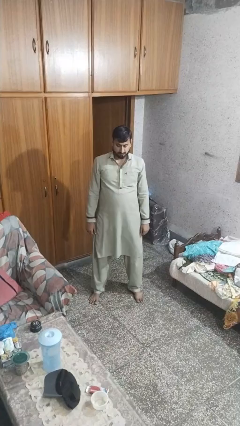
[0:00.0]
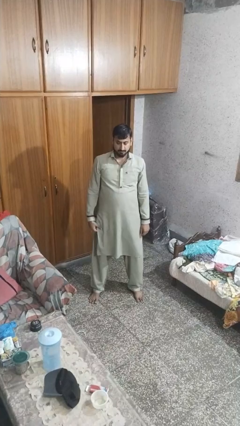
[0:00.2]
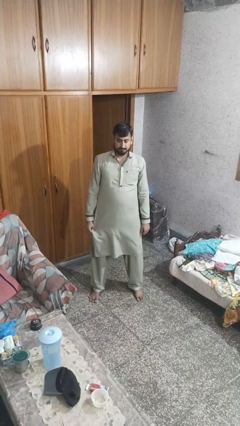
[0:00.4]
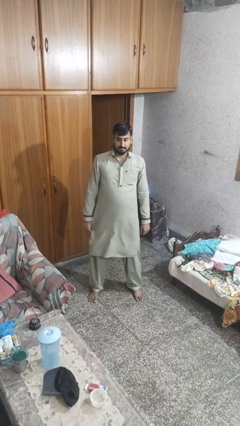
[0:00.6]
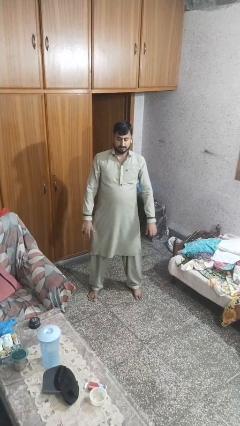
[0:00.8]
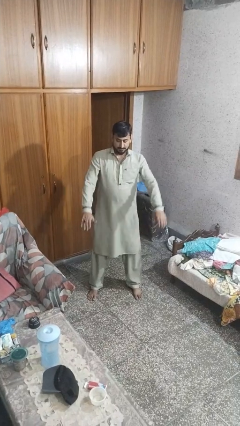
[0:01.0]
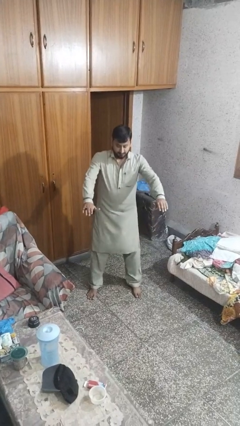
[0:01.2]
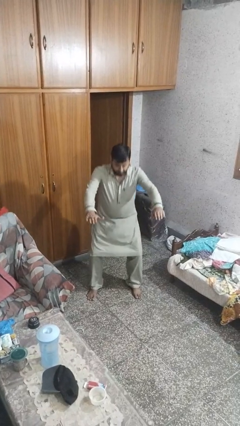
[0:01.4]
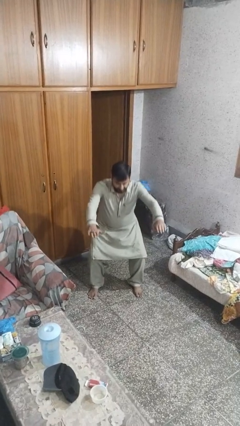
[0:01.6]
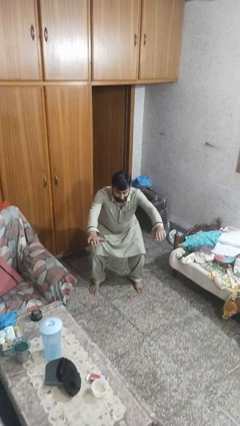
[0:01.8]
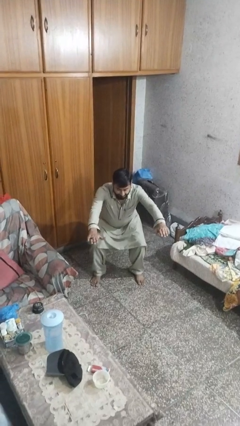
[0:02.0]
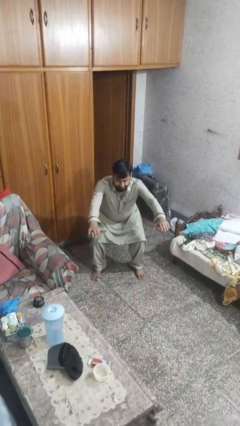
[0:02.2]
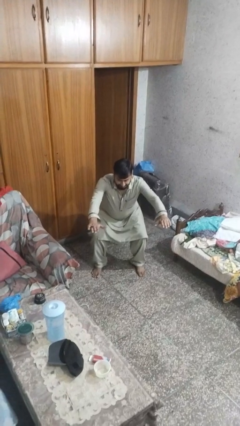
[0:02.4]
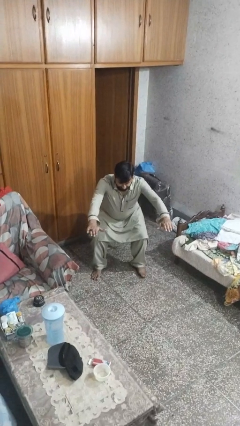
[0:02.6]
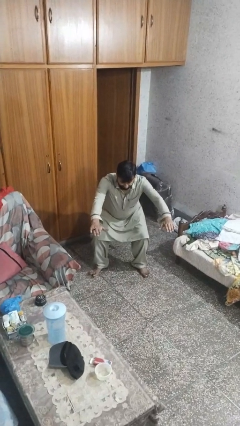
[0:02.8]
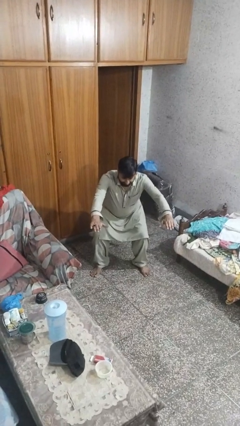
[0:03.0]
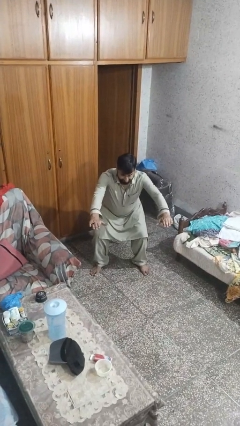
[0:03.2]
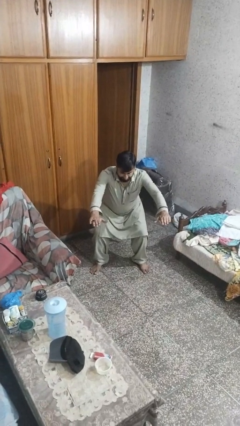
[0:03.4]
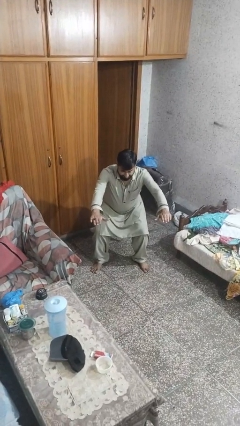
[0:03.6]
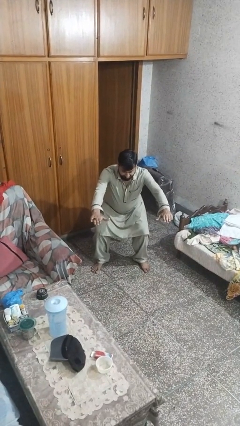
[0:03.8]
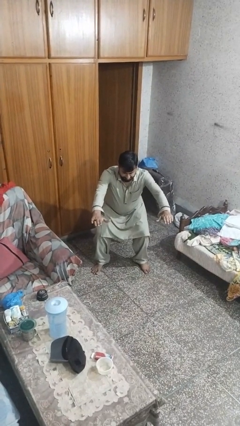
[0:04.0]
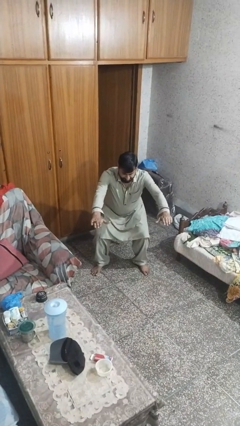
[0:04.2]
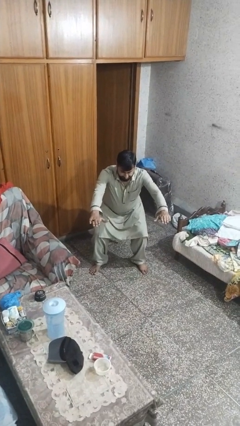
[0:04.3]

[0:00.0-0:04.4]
person squats

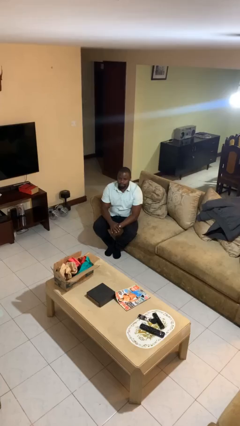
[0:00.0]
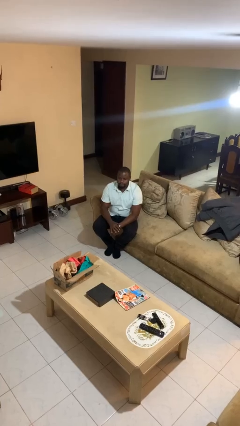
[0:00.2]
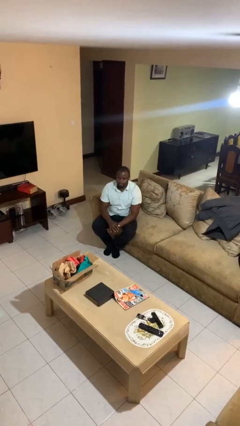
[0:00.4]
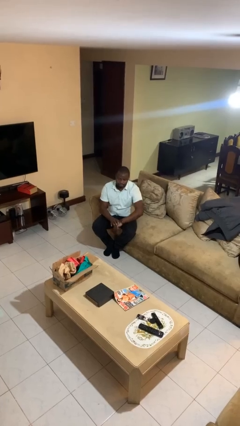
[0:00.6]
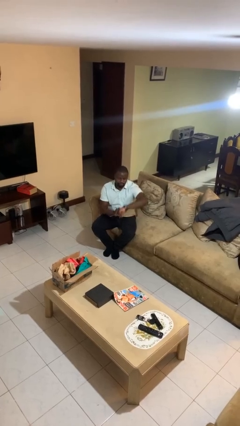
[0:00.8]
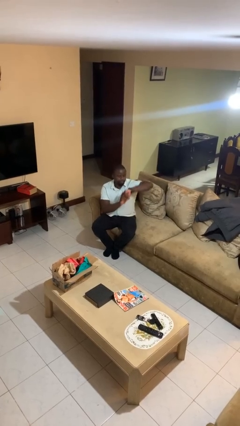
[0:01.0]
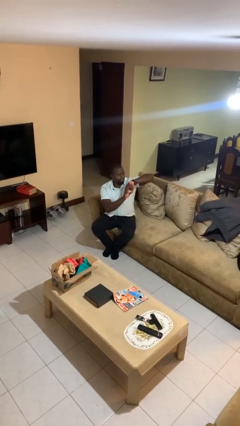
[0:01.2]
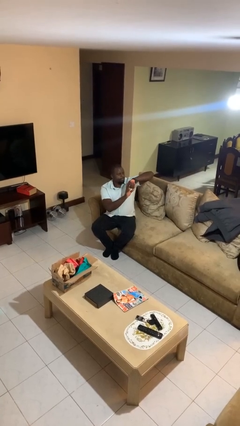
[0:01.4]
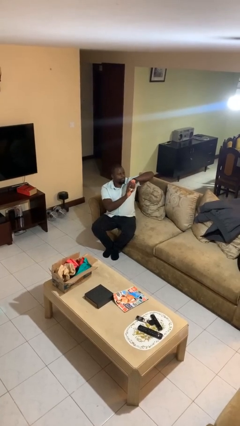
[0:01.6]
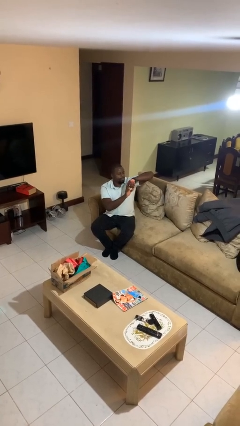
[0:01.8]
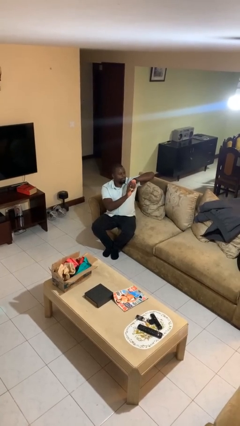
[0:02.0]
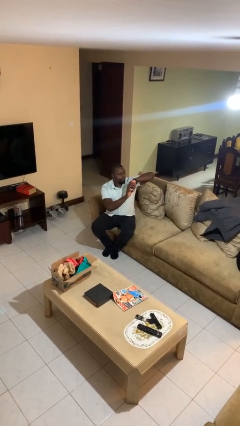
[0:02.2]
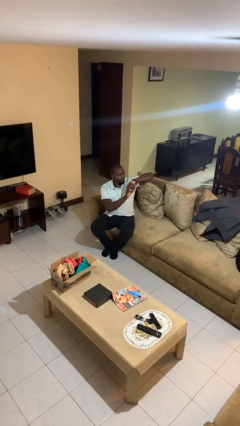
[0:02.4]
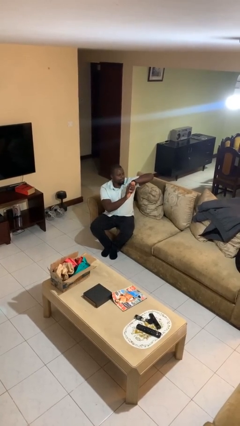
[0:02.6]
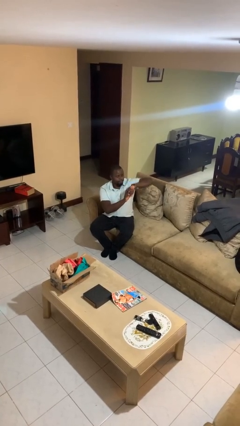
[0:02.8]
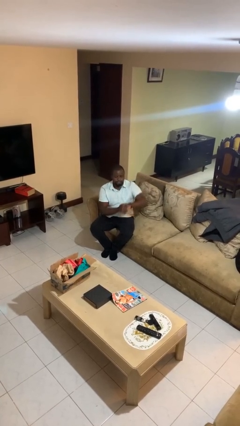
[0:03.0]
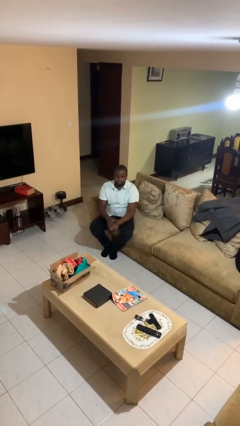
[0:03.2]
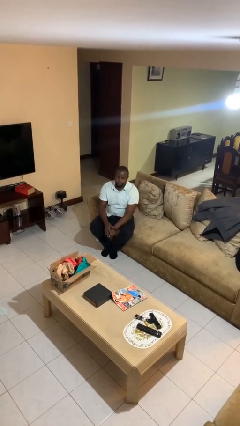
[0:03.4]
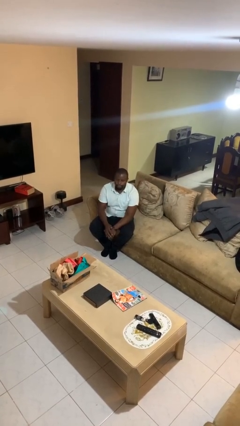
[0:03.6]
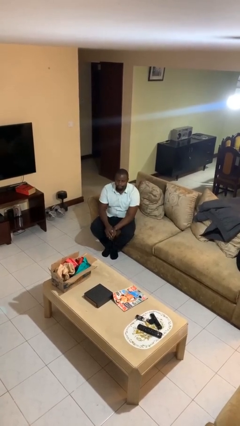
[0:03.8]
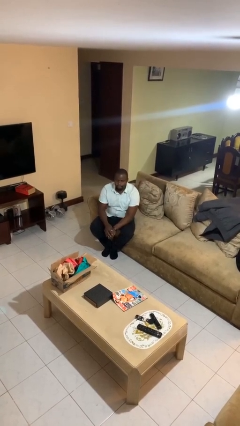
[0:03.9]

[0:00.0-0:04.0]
person looks at wristwatch

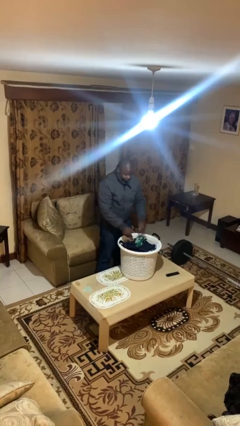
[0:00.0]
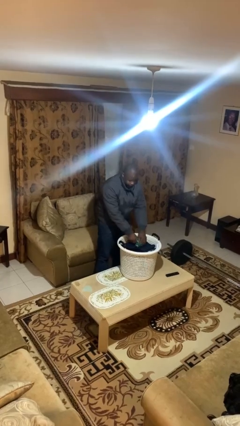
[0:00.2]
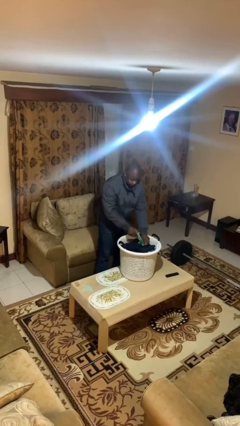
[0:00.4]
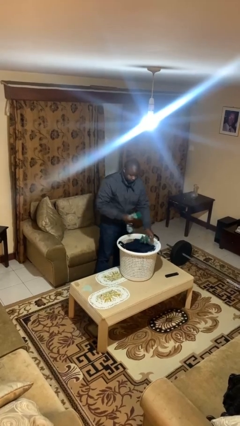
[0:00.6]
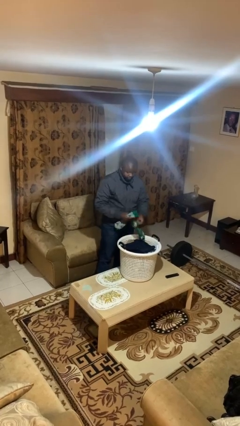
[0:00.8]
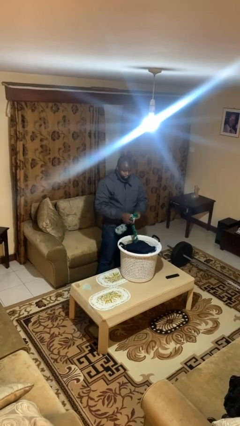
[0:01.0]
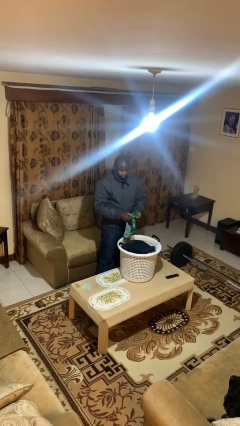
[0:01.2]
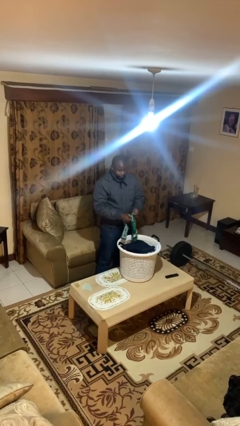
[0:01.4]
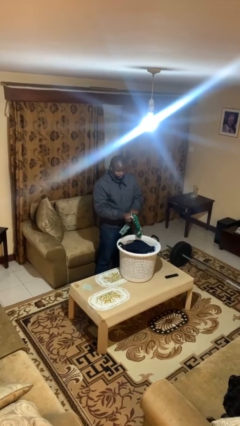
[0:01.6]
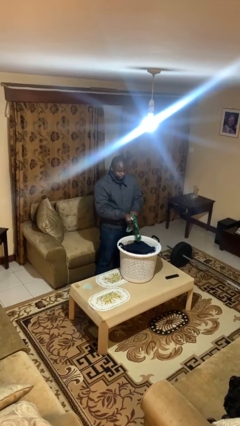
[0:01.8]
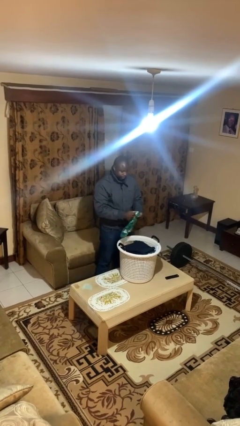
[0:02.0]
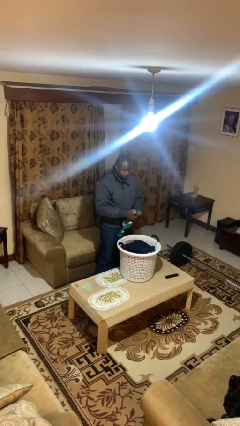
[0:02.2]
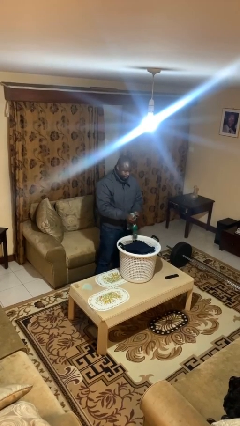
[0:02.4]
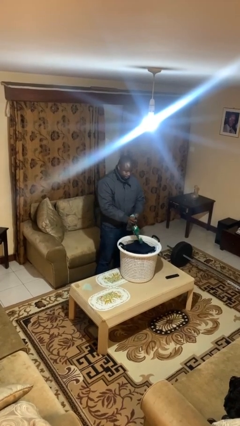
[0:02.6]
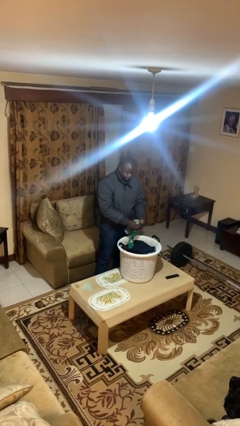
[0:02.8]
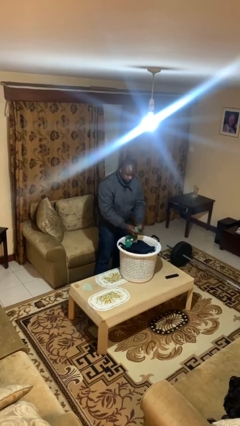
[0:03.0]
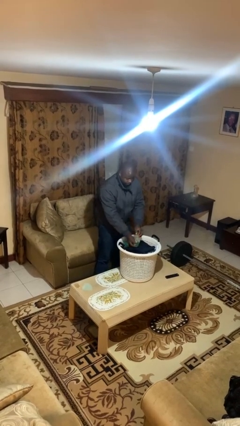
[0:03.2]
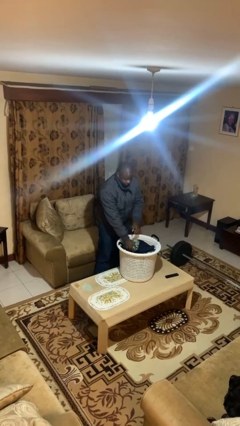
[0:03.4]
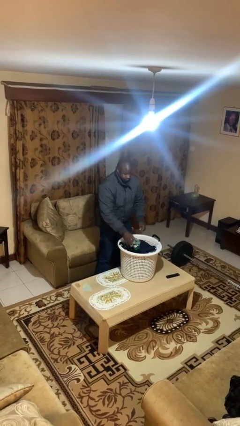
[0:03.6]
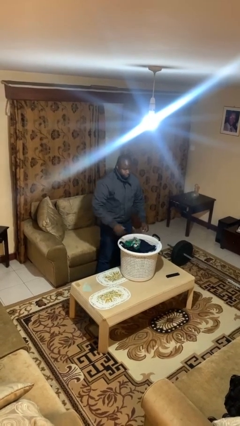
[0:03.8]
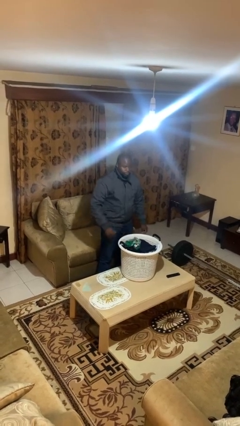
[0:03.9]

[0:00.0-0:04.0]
person folds socks

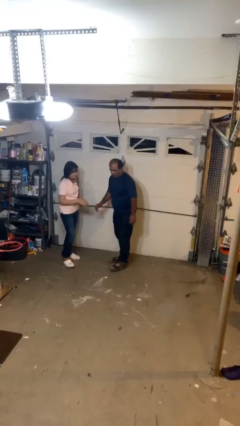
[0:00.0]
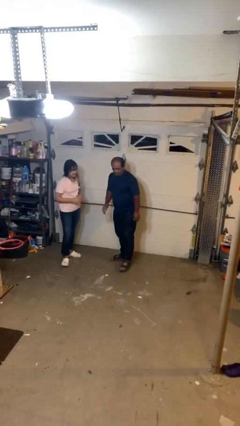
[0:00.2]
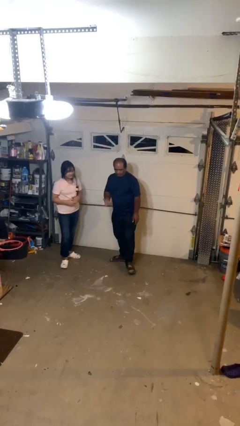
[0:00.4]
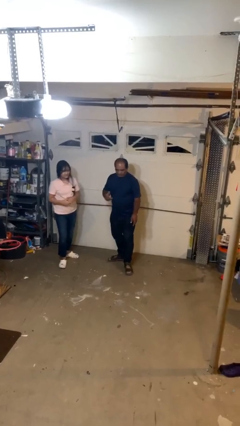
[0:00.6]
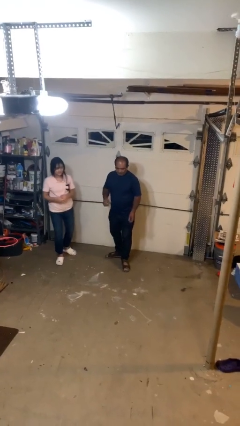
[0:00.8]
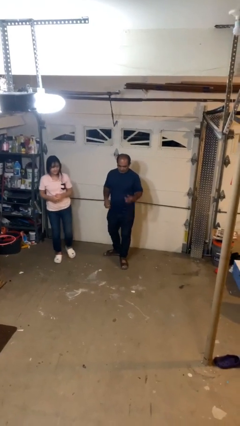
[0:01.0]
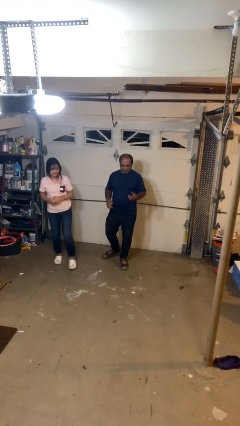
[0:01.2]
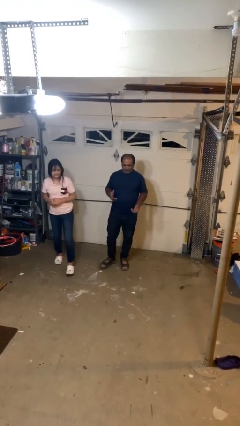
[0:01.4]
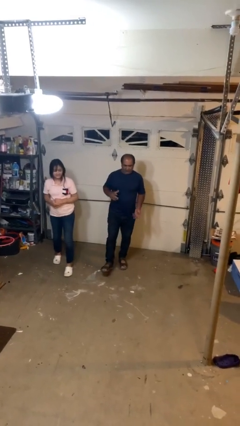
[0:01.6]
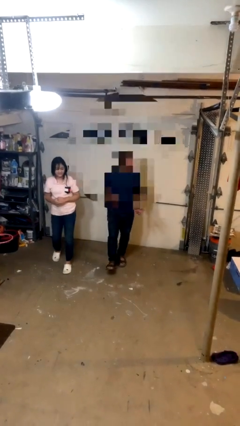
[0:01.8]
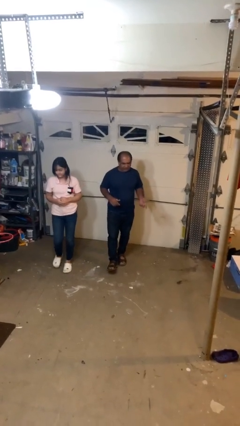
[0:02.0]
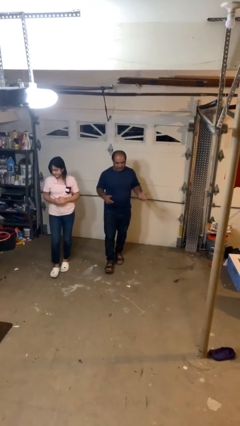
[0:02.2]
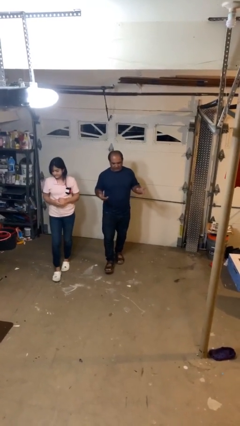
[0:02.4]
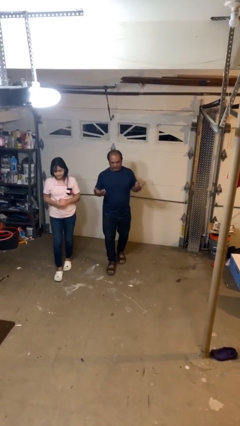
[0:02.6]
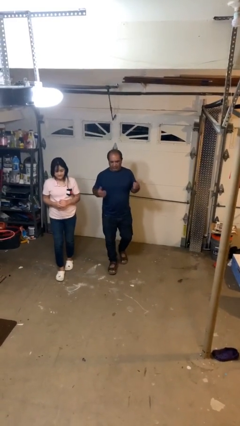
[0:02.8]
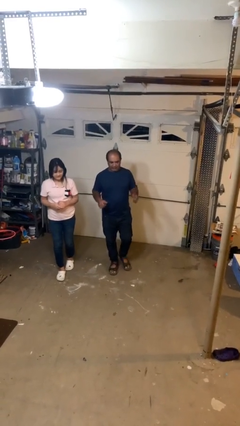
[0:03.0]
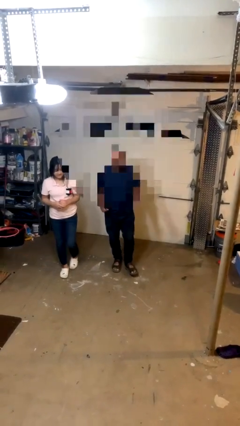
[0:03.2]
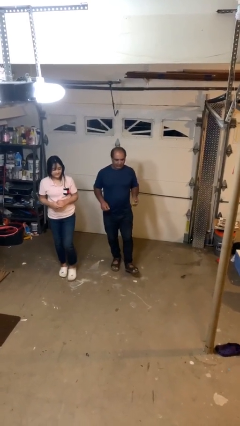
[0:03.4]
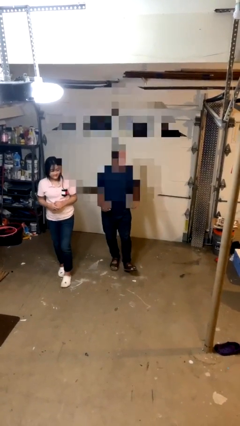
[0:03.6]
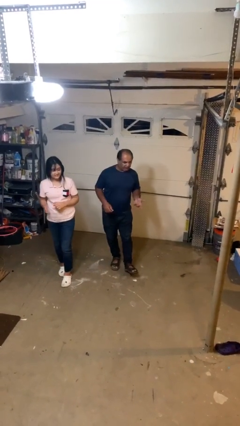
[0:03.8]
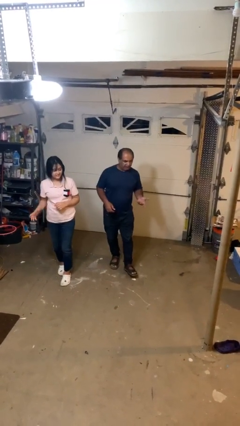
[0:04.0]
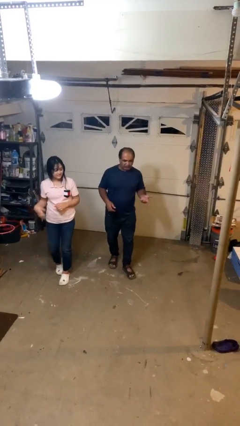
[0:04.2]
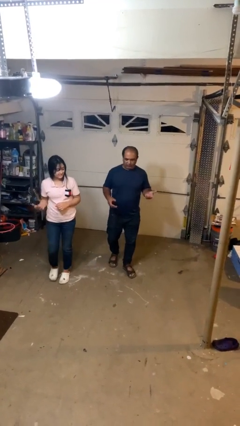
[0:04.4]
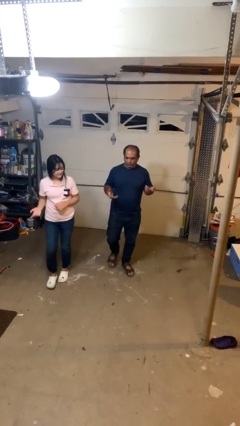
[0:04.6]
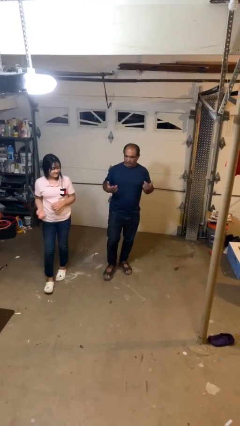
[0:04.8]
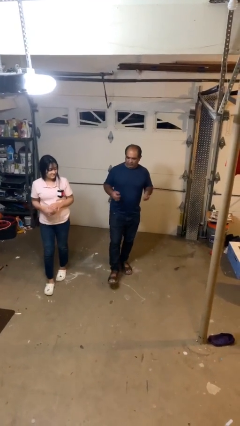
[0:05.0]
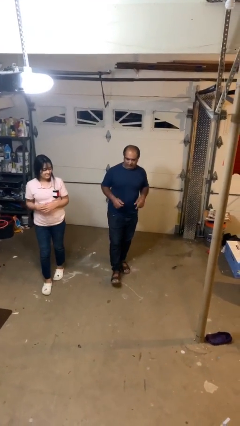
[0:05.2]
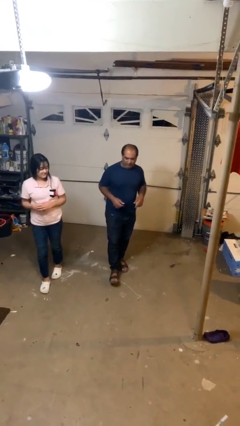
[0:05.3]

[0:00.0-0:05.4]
person talks to person

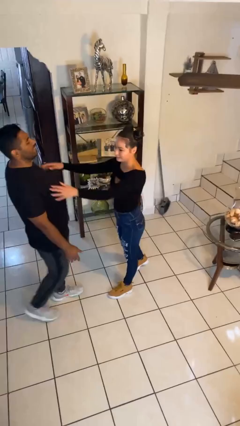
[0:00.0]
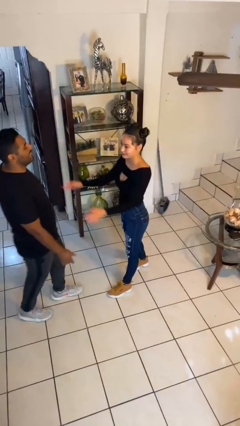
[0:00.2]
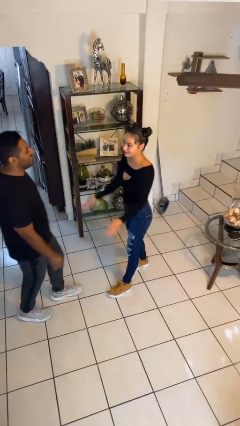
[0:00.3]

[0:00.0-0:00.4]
person shoves person
